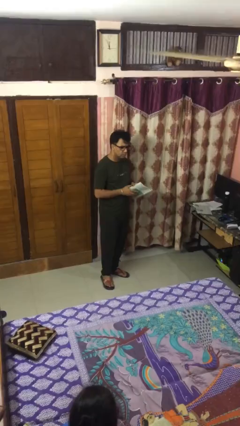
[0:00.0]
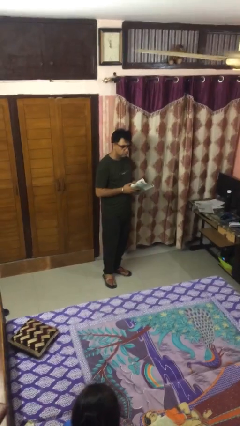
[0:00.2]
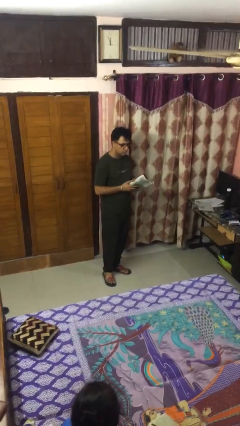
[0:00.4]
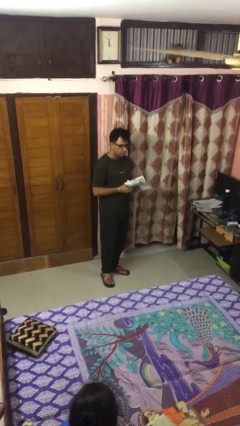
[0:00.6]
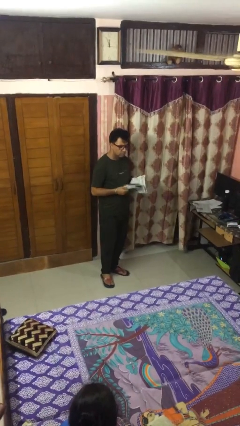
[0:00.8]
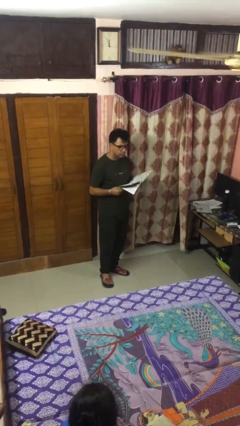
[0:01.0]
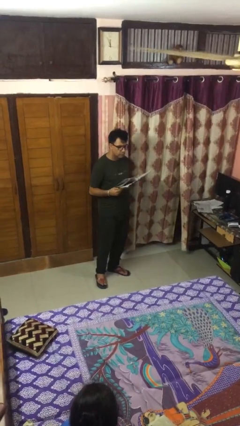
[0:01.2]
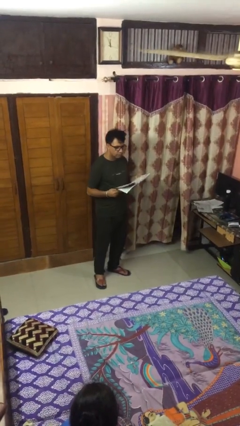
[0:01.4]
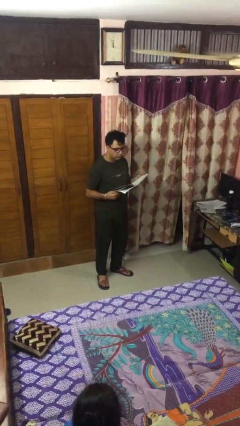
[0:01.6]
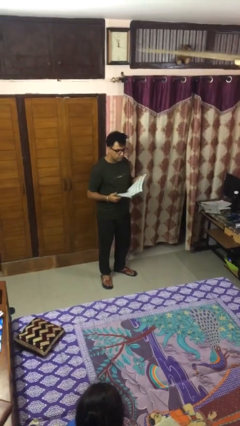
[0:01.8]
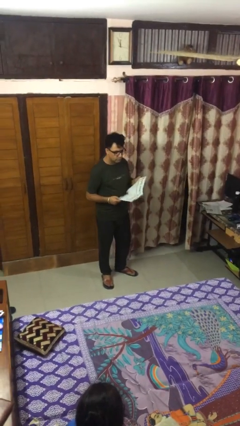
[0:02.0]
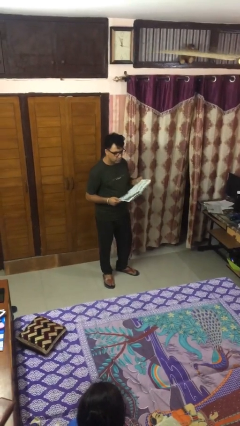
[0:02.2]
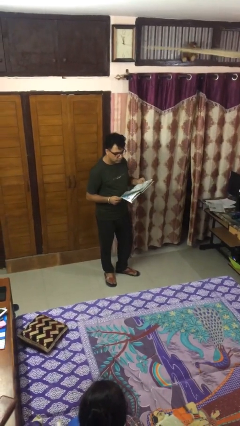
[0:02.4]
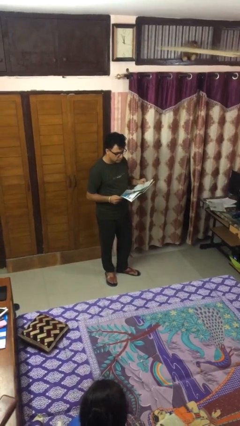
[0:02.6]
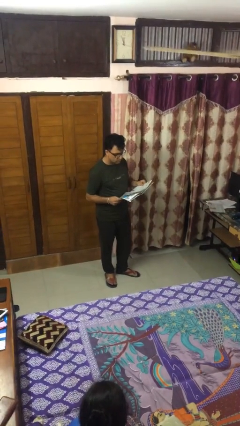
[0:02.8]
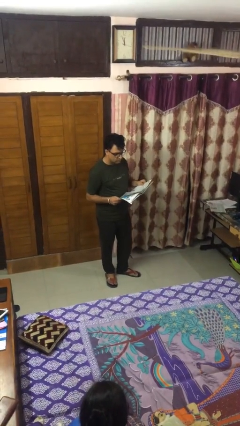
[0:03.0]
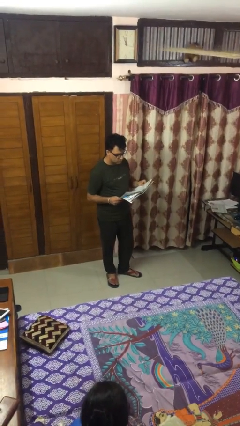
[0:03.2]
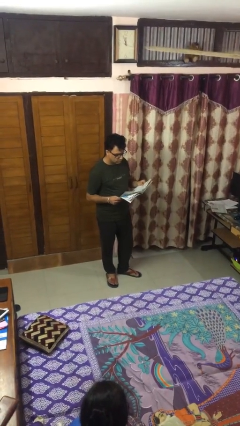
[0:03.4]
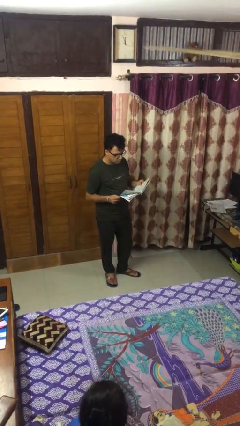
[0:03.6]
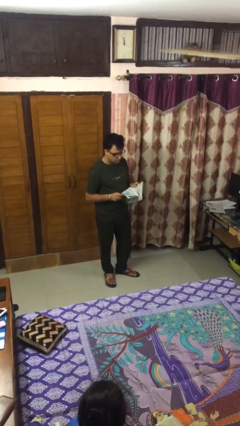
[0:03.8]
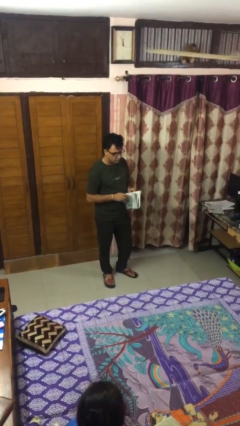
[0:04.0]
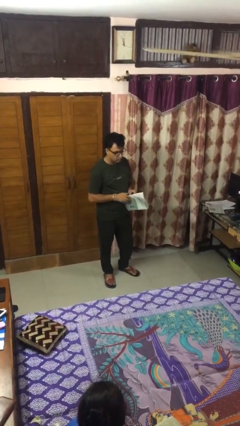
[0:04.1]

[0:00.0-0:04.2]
person reads newspaper

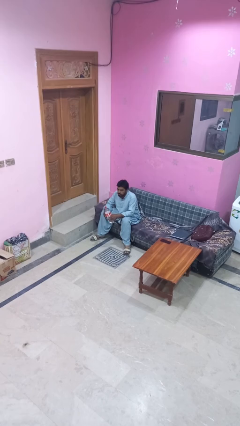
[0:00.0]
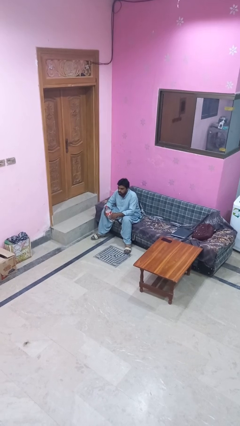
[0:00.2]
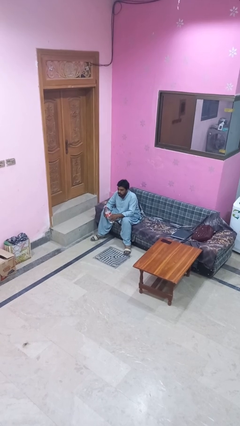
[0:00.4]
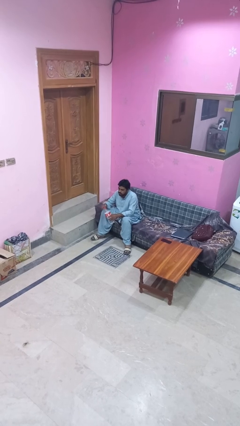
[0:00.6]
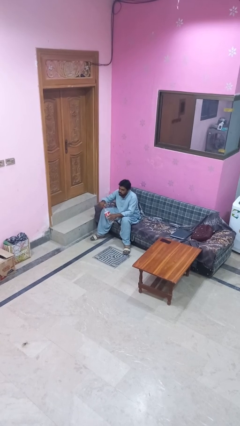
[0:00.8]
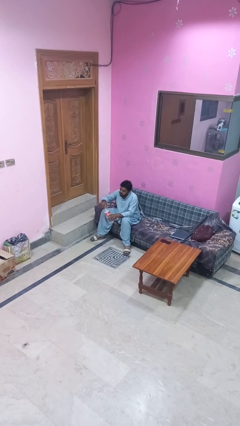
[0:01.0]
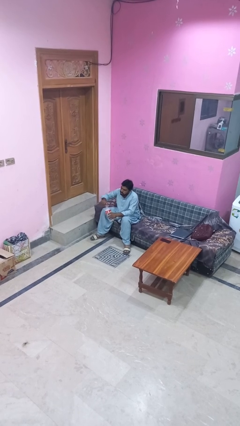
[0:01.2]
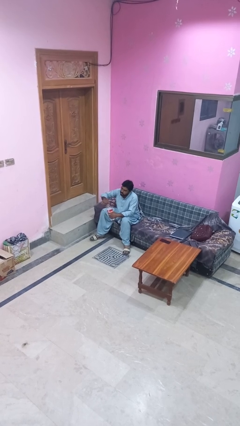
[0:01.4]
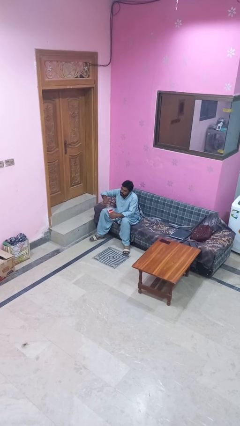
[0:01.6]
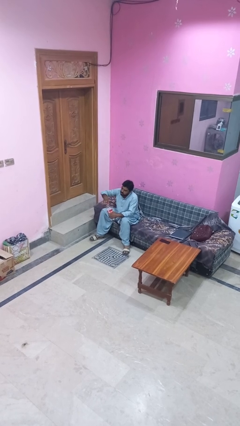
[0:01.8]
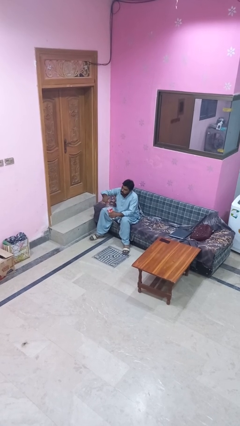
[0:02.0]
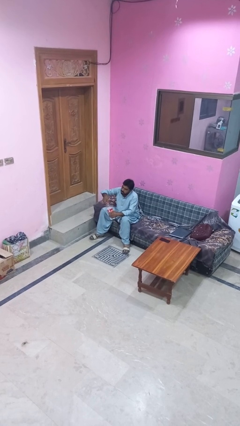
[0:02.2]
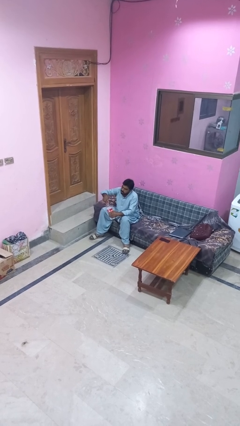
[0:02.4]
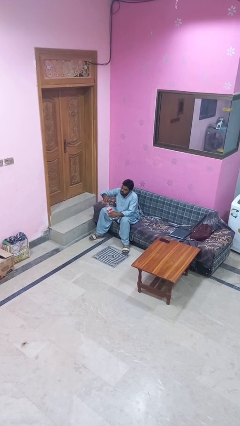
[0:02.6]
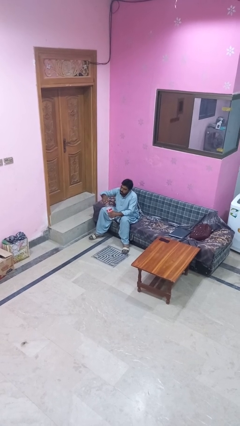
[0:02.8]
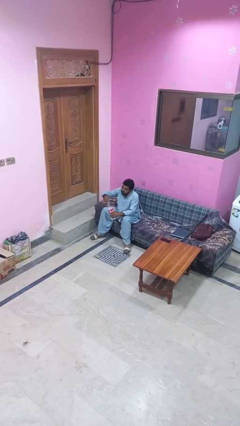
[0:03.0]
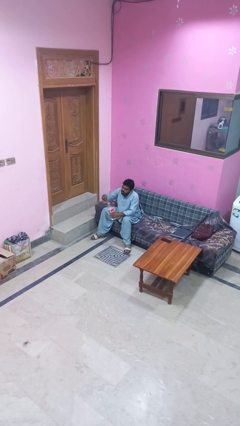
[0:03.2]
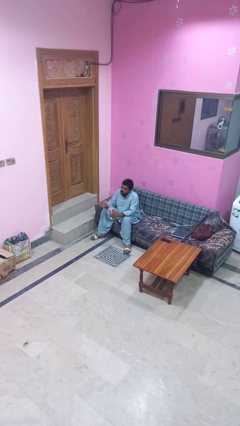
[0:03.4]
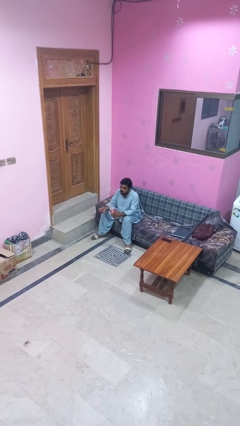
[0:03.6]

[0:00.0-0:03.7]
person unscrews lid from bottle

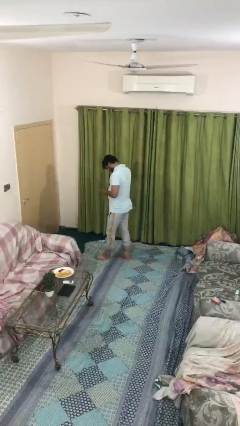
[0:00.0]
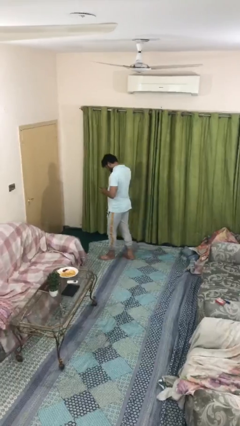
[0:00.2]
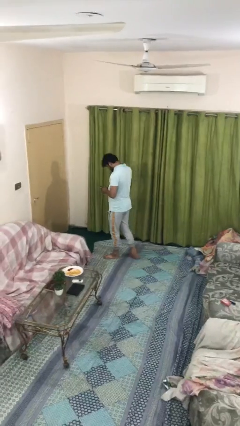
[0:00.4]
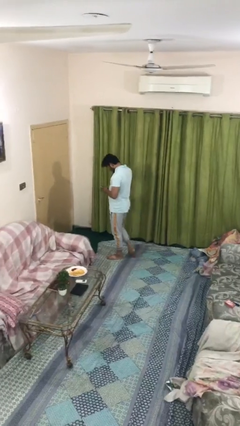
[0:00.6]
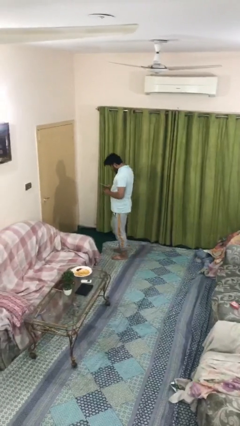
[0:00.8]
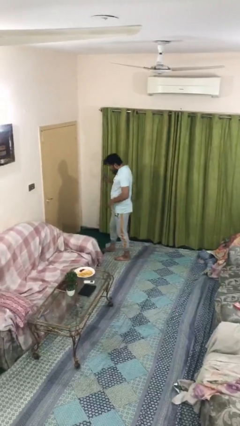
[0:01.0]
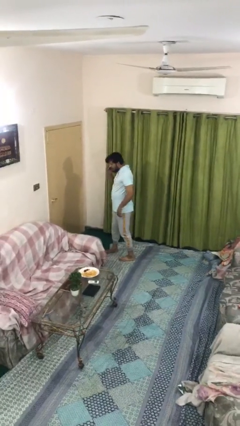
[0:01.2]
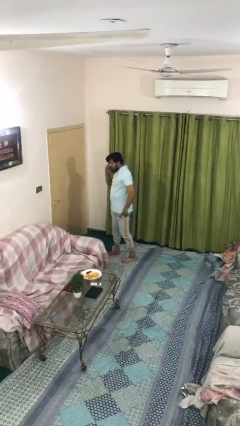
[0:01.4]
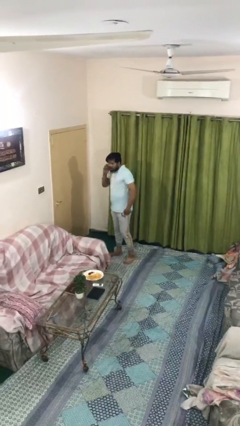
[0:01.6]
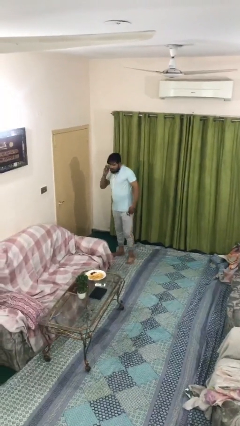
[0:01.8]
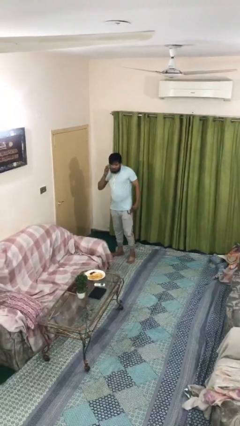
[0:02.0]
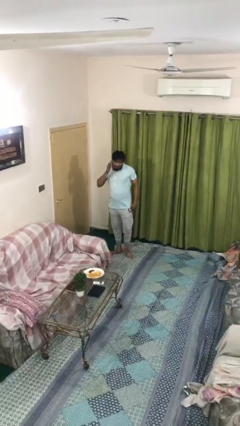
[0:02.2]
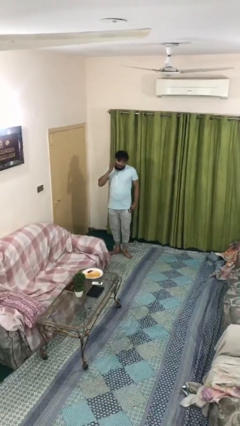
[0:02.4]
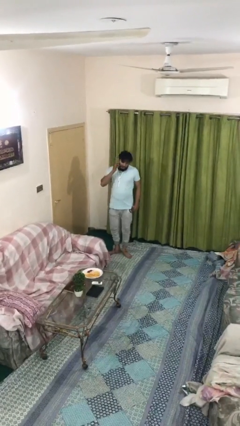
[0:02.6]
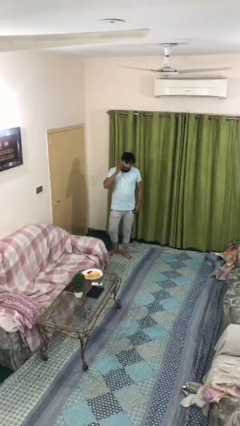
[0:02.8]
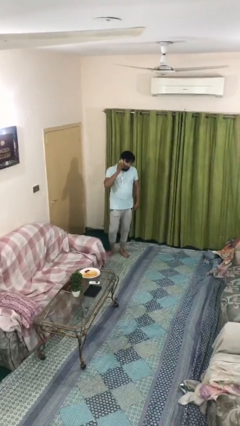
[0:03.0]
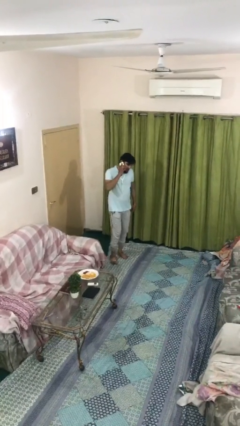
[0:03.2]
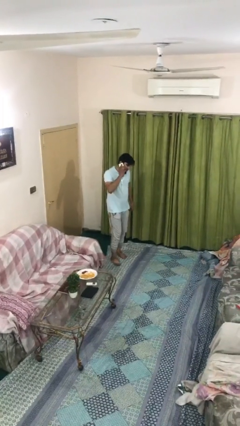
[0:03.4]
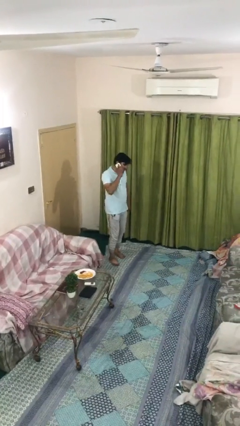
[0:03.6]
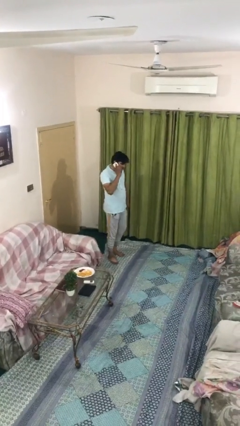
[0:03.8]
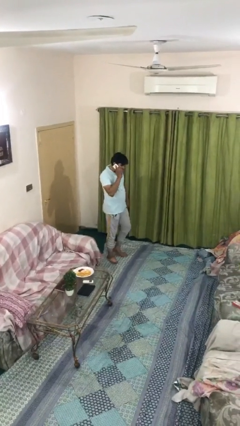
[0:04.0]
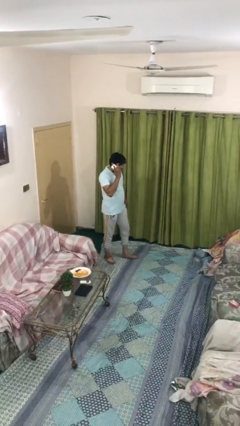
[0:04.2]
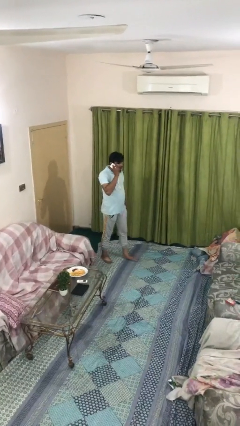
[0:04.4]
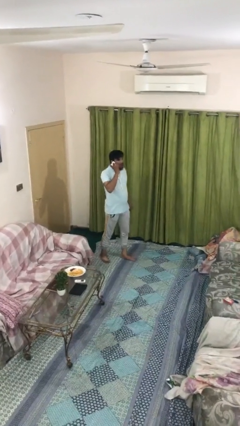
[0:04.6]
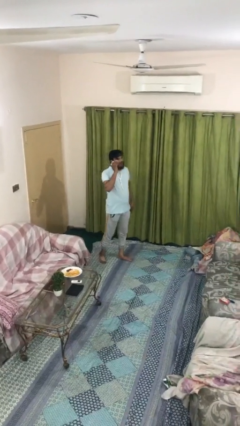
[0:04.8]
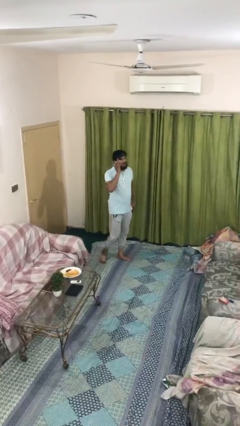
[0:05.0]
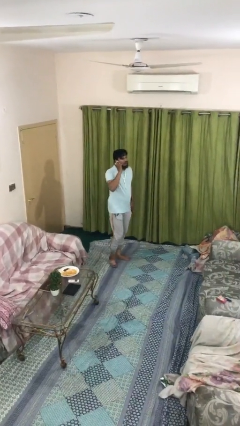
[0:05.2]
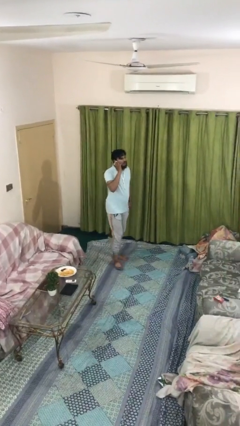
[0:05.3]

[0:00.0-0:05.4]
person talks on phone

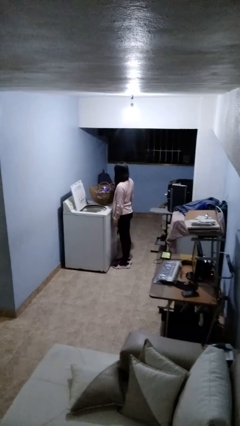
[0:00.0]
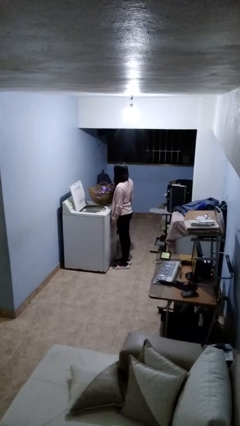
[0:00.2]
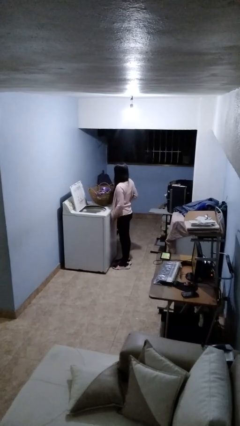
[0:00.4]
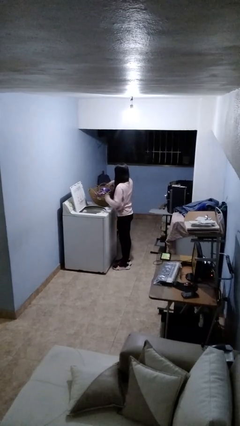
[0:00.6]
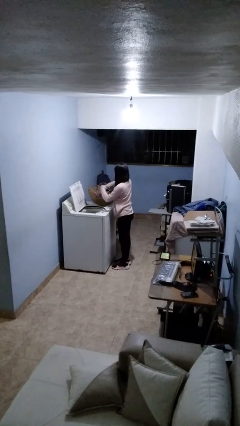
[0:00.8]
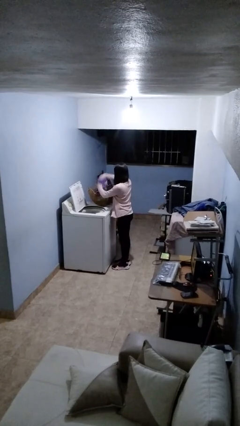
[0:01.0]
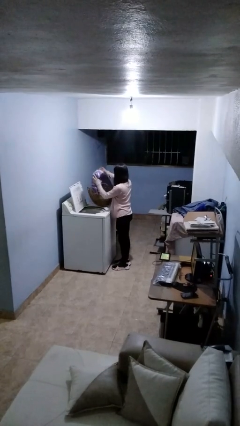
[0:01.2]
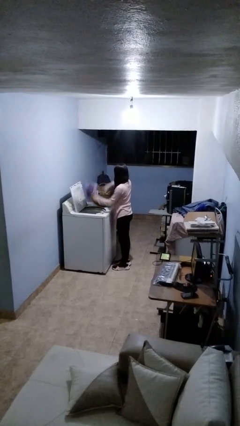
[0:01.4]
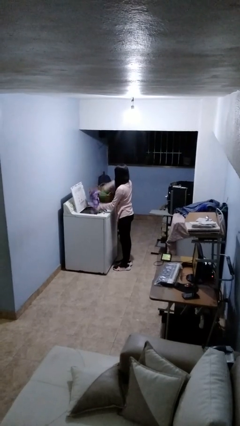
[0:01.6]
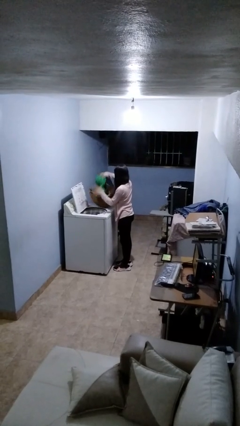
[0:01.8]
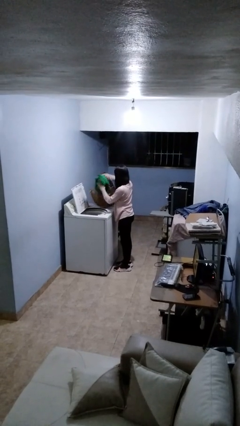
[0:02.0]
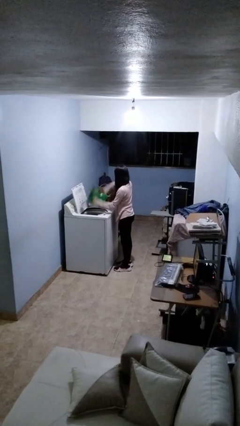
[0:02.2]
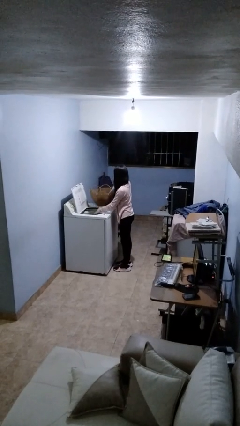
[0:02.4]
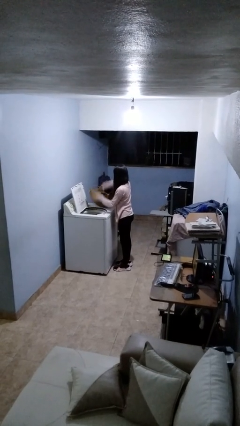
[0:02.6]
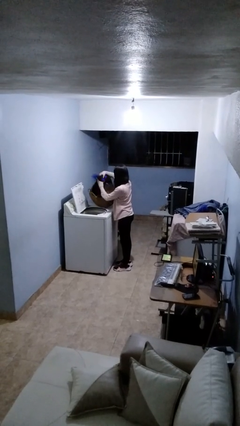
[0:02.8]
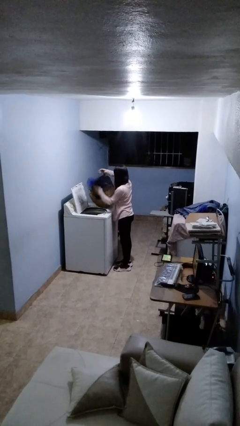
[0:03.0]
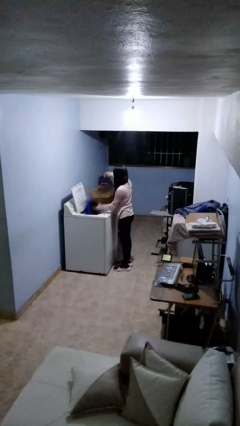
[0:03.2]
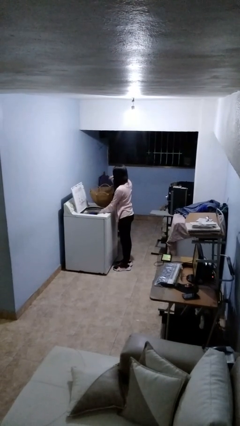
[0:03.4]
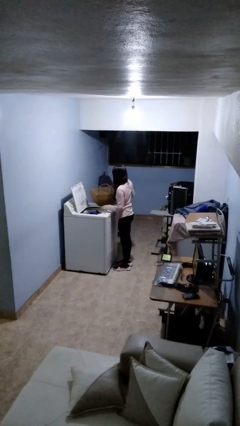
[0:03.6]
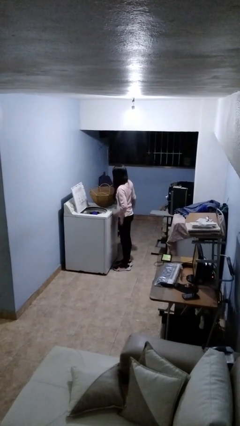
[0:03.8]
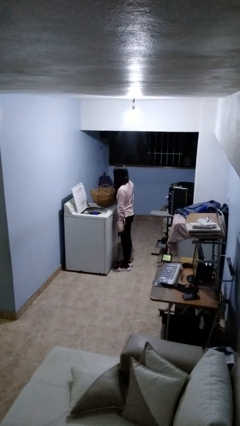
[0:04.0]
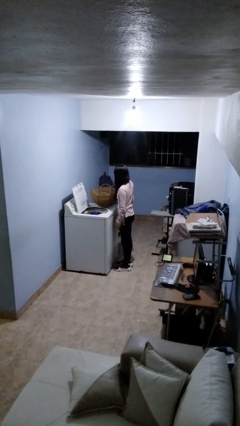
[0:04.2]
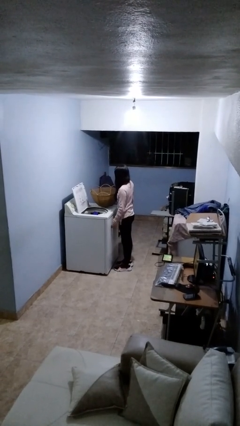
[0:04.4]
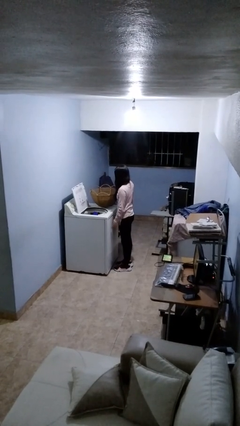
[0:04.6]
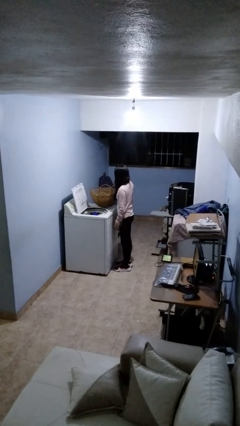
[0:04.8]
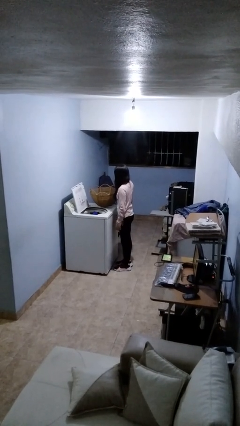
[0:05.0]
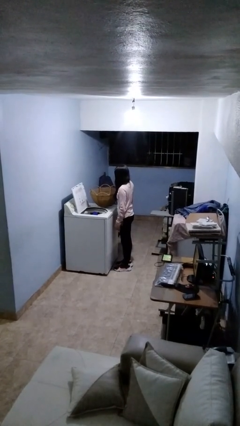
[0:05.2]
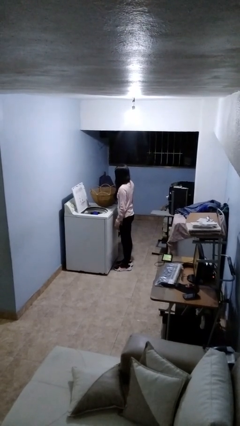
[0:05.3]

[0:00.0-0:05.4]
person unloads clotheswasher
